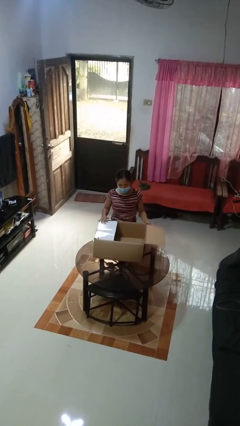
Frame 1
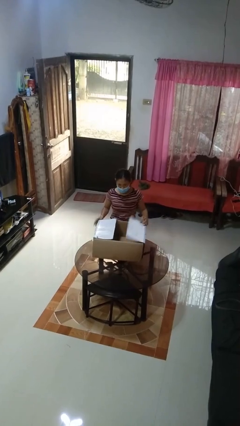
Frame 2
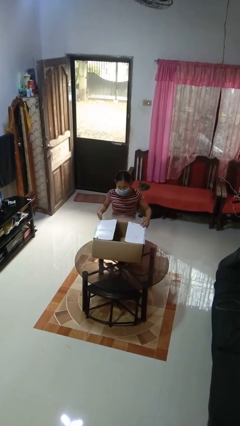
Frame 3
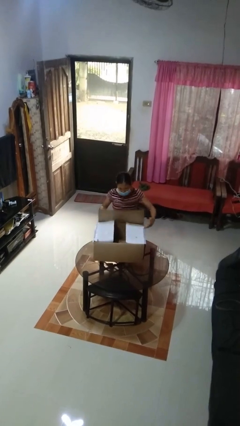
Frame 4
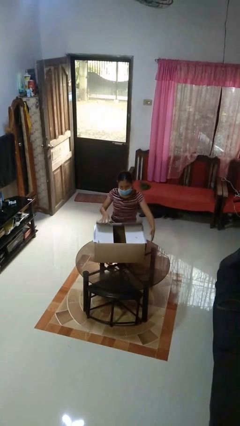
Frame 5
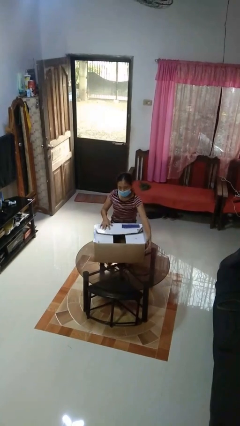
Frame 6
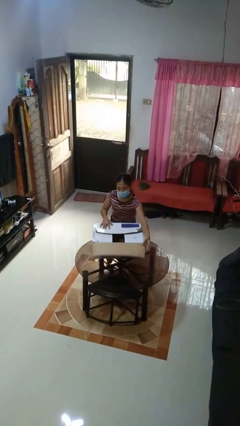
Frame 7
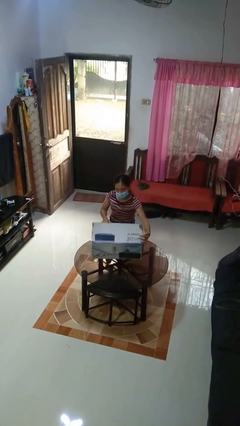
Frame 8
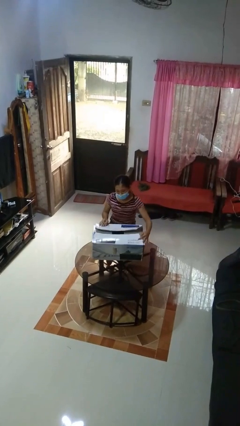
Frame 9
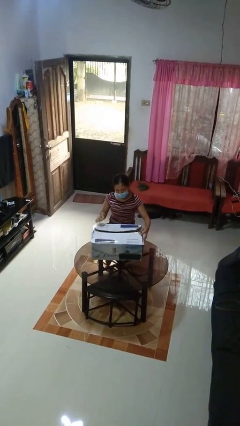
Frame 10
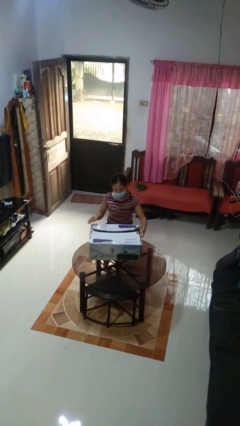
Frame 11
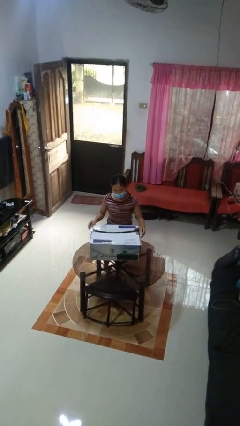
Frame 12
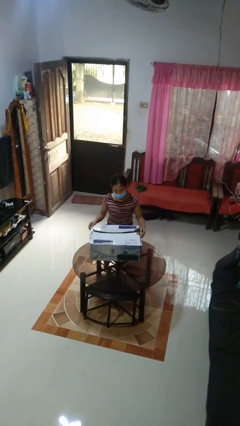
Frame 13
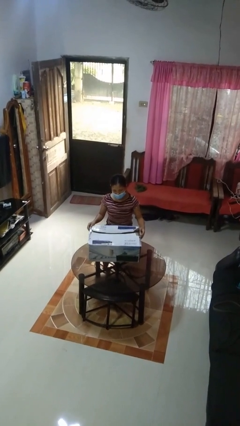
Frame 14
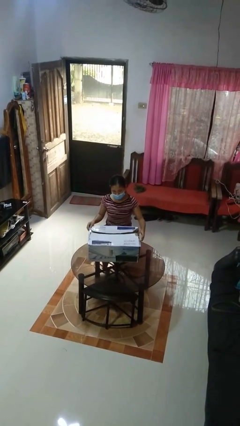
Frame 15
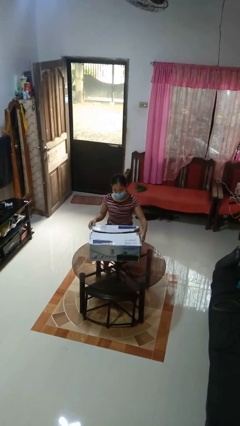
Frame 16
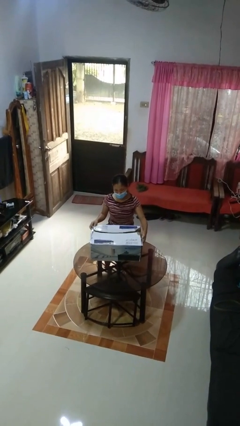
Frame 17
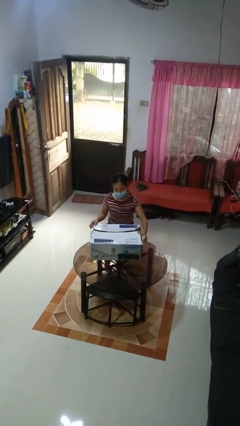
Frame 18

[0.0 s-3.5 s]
person closes box

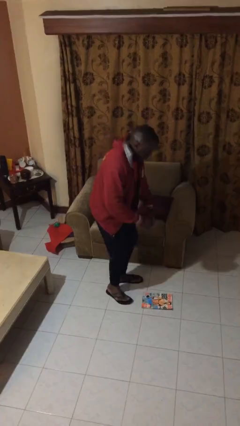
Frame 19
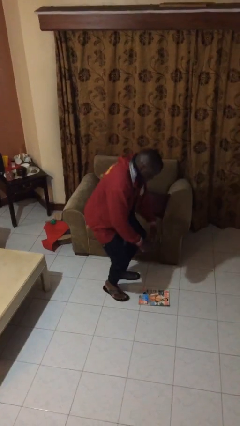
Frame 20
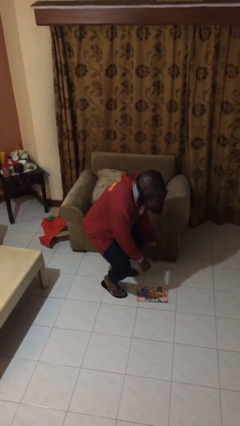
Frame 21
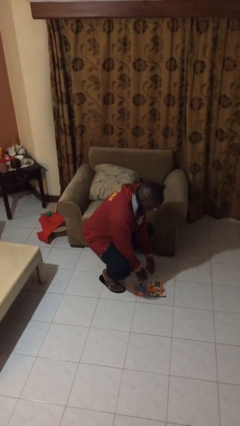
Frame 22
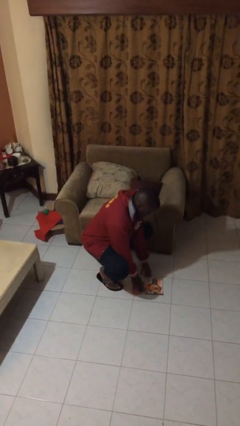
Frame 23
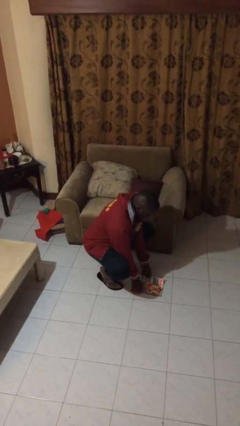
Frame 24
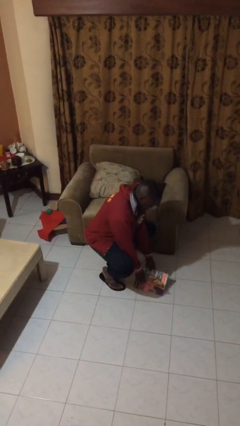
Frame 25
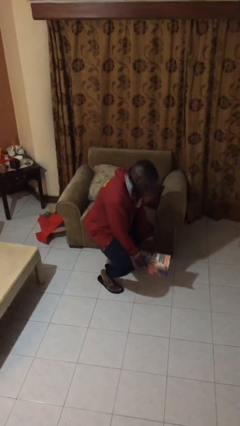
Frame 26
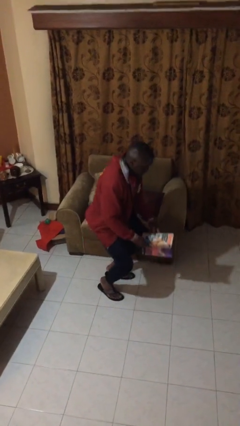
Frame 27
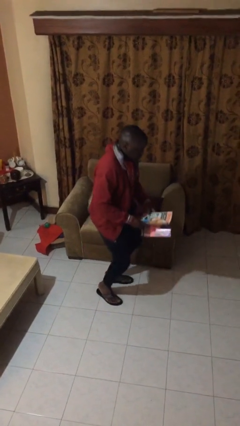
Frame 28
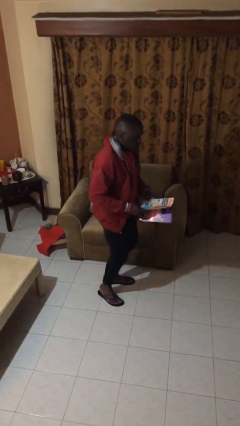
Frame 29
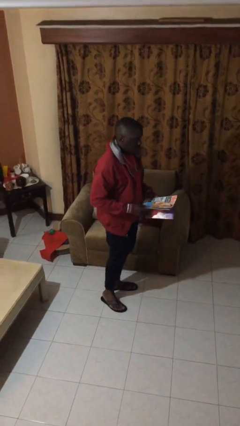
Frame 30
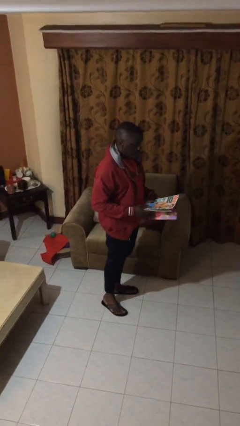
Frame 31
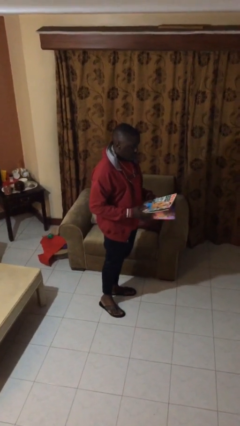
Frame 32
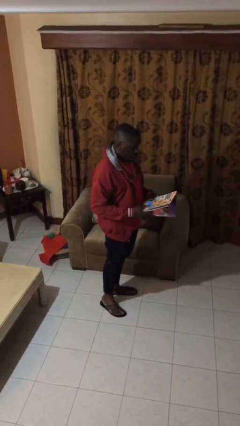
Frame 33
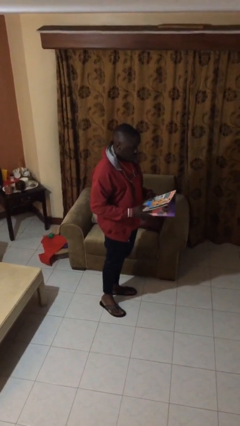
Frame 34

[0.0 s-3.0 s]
person picks up object from floor

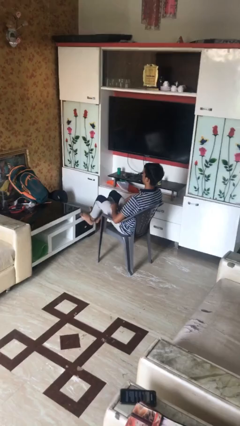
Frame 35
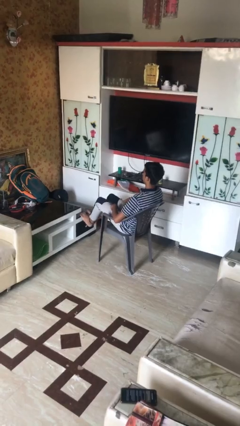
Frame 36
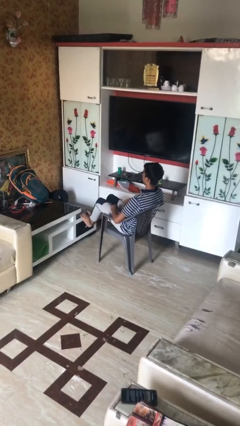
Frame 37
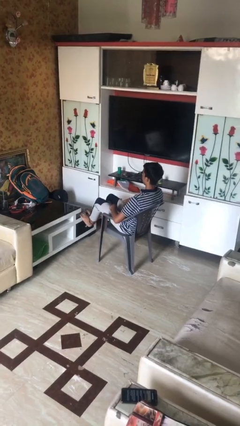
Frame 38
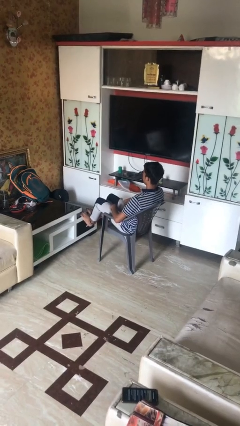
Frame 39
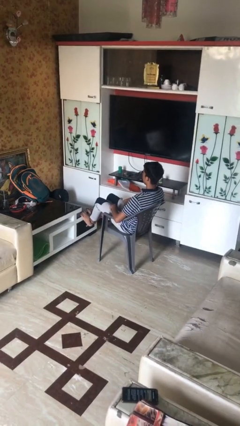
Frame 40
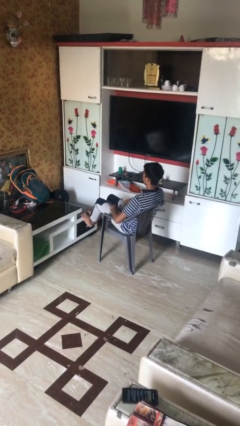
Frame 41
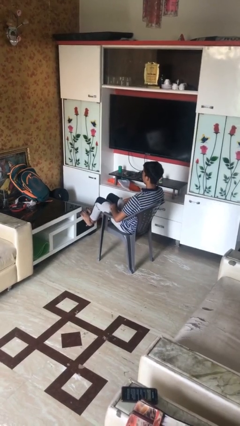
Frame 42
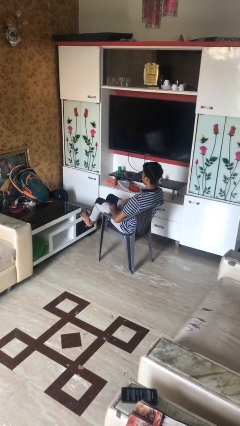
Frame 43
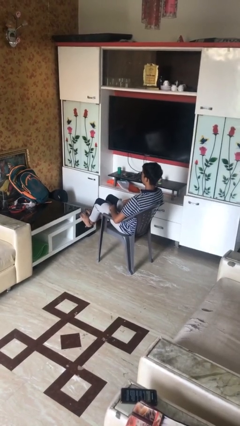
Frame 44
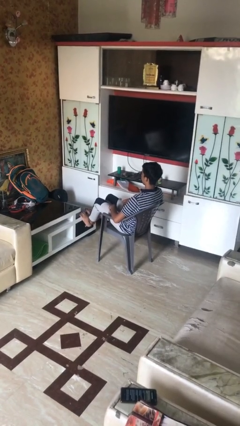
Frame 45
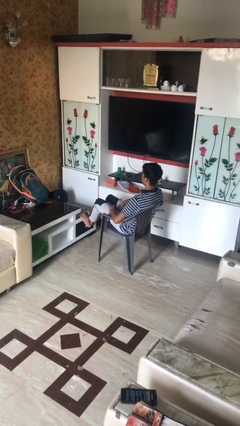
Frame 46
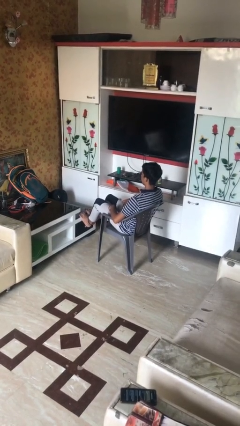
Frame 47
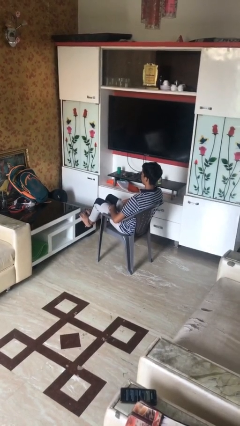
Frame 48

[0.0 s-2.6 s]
person puts feet up

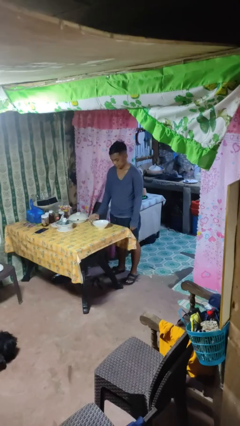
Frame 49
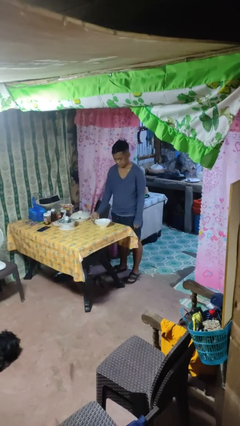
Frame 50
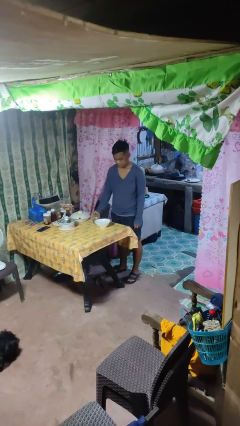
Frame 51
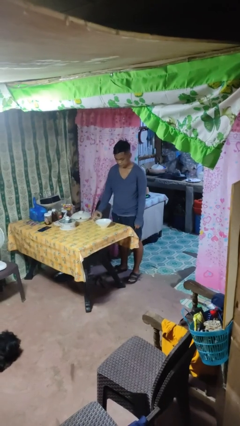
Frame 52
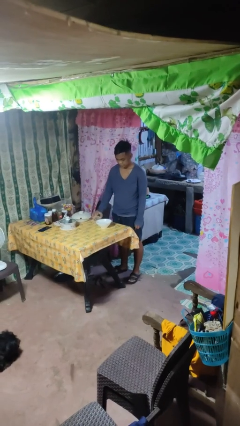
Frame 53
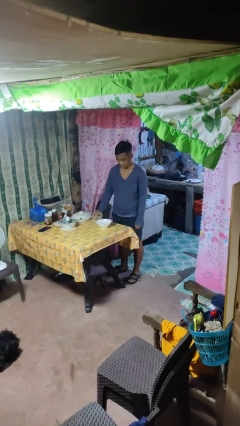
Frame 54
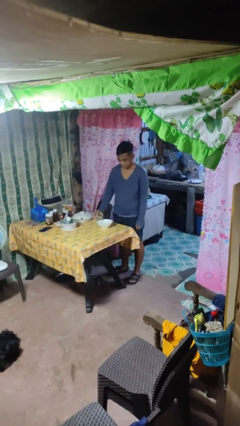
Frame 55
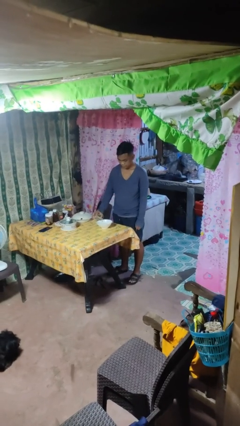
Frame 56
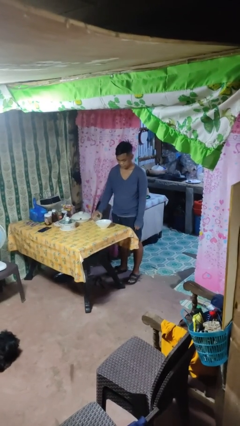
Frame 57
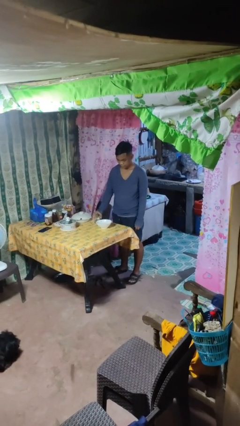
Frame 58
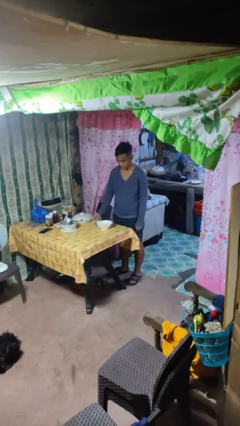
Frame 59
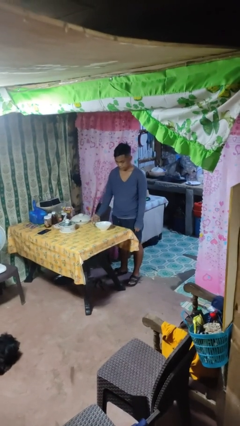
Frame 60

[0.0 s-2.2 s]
person pours into bowl

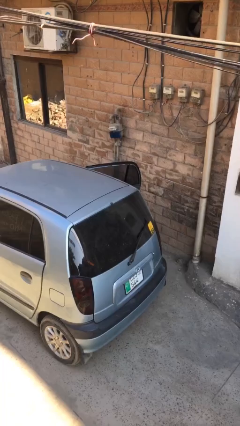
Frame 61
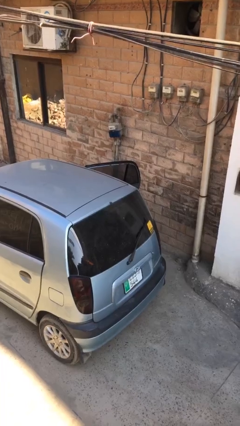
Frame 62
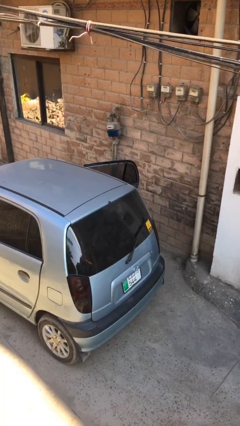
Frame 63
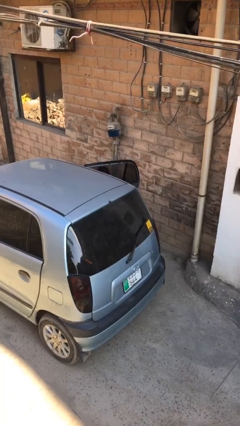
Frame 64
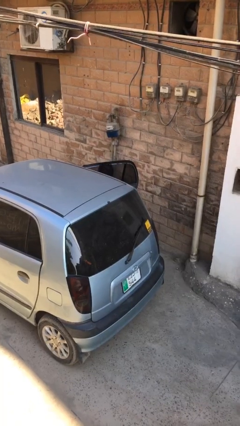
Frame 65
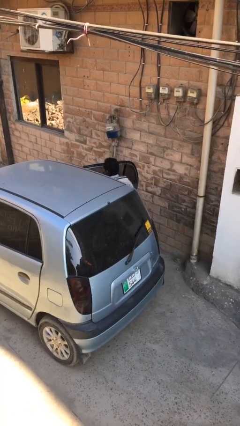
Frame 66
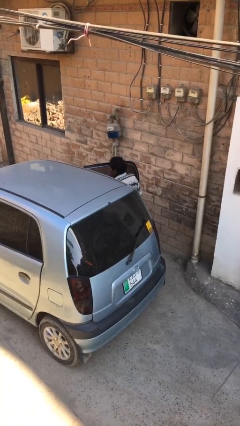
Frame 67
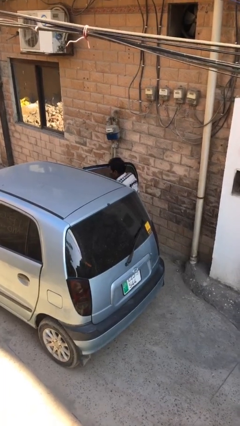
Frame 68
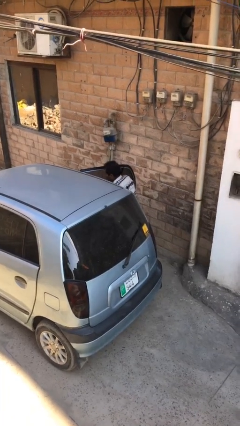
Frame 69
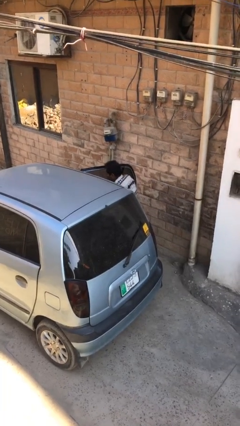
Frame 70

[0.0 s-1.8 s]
person exits car

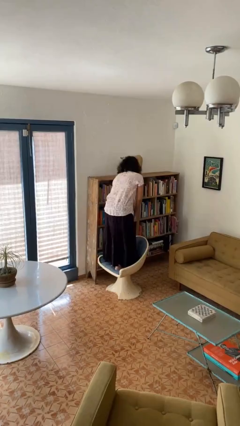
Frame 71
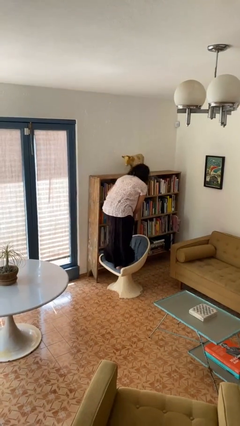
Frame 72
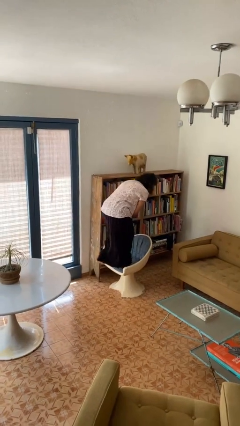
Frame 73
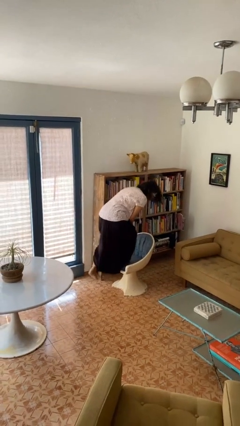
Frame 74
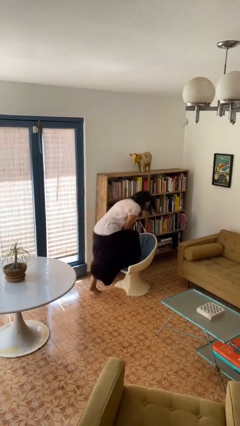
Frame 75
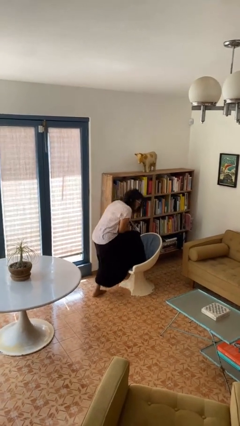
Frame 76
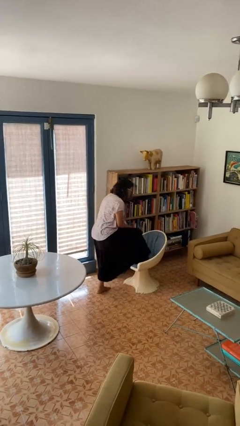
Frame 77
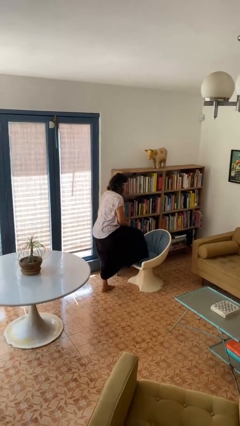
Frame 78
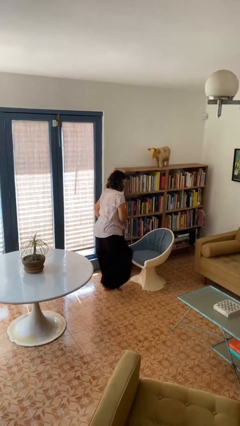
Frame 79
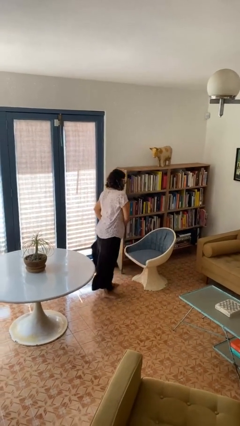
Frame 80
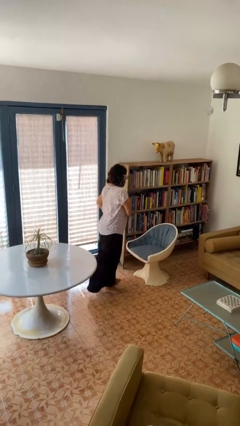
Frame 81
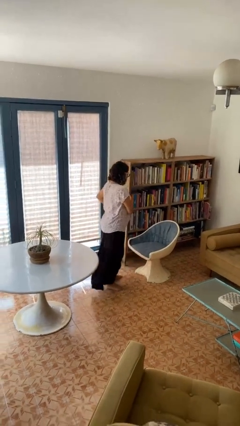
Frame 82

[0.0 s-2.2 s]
person climbs off chair

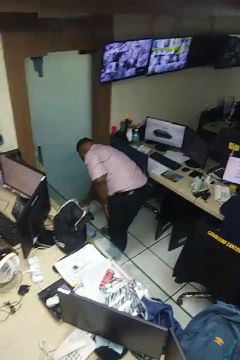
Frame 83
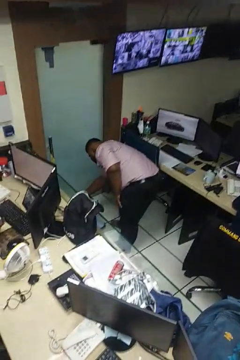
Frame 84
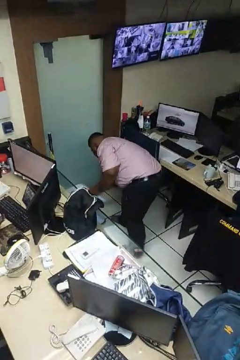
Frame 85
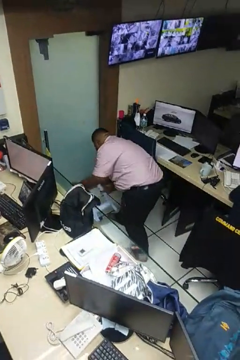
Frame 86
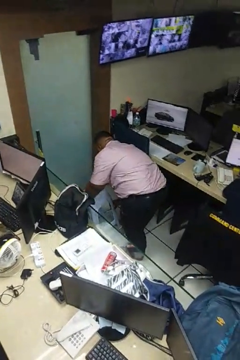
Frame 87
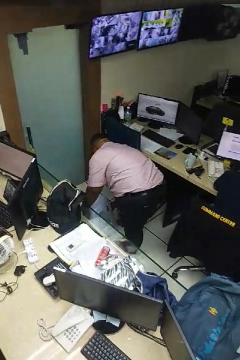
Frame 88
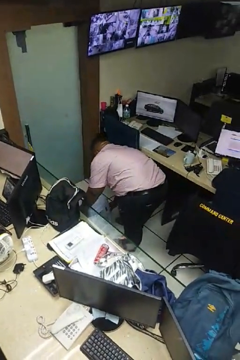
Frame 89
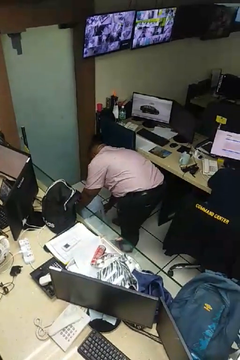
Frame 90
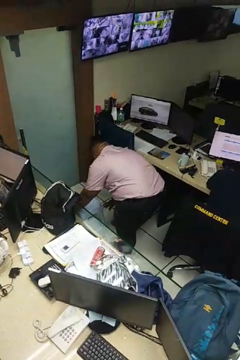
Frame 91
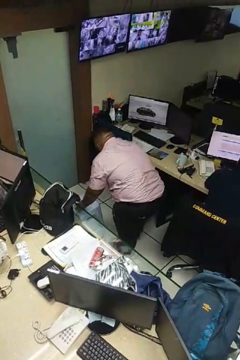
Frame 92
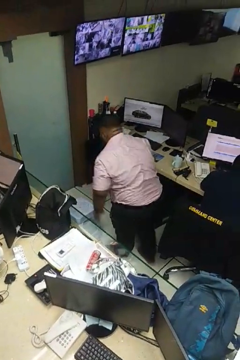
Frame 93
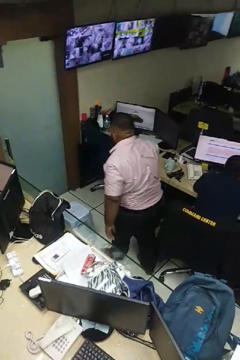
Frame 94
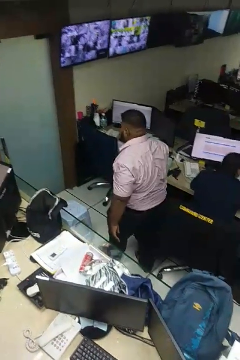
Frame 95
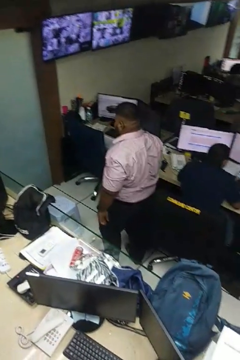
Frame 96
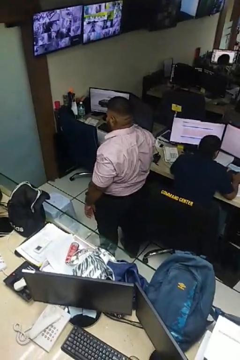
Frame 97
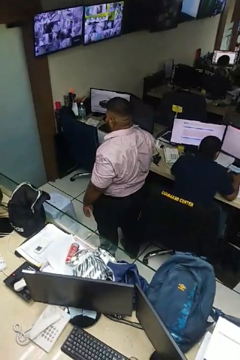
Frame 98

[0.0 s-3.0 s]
person sets upright furniture
